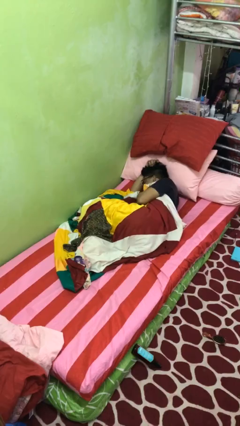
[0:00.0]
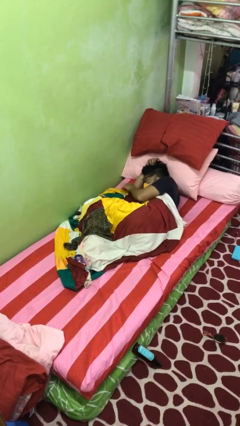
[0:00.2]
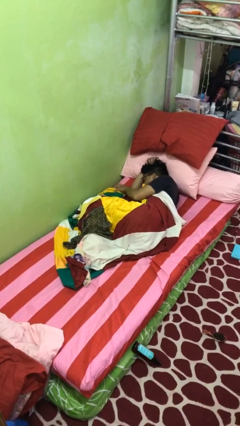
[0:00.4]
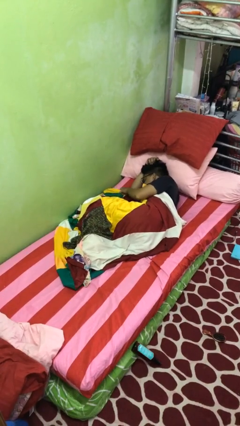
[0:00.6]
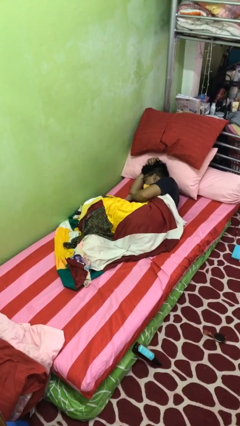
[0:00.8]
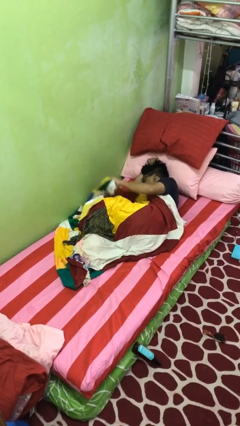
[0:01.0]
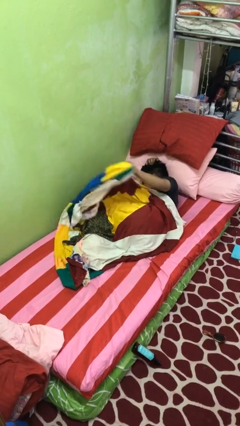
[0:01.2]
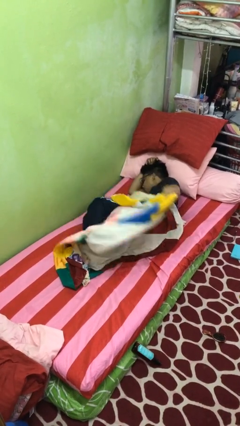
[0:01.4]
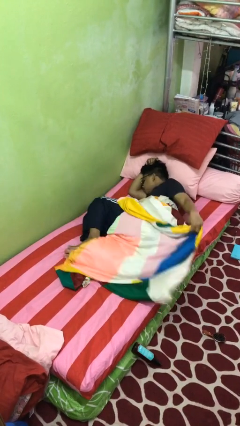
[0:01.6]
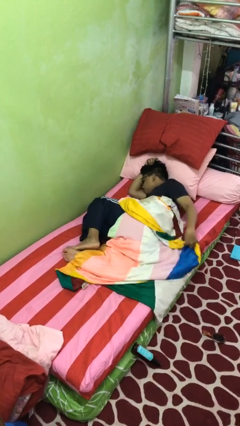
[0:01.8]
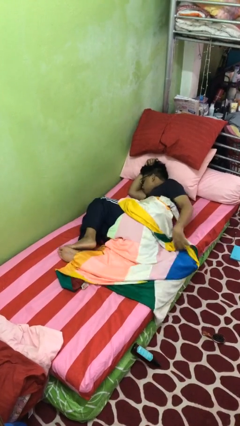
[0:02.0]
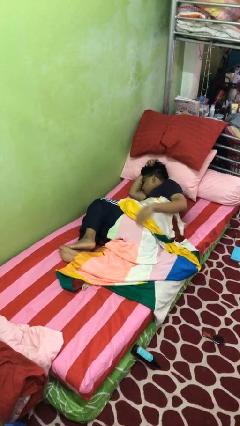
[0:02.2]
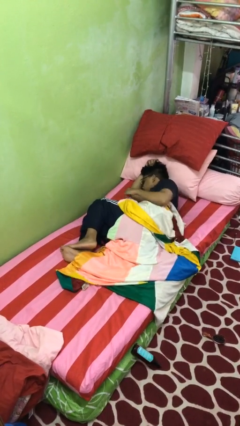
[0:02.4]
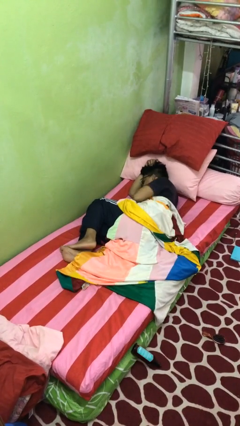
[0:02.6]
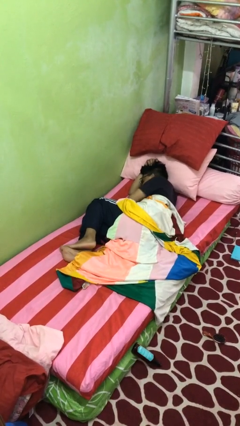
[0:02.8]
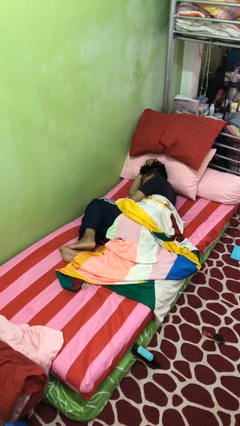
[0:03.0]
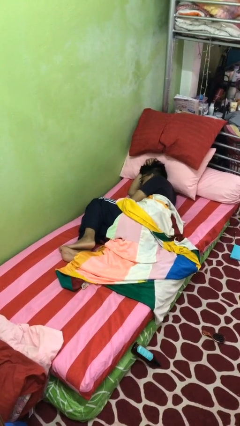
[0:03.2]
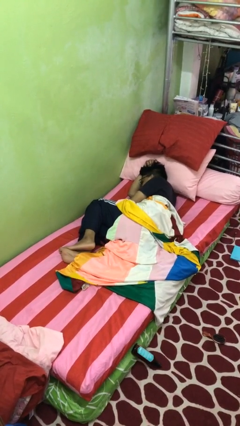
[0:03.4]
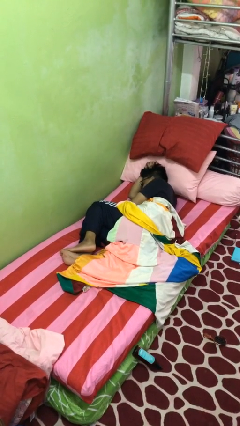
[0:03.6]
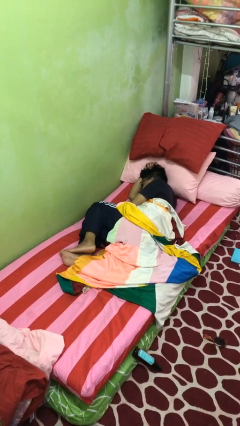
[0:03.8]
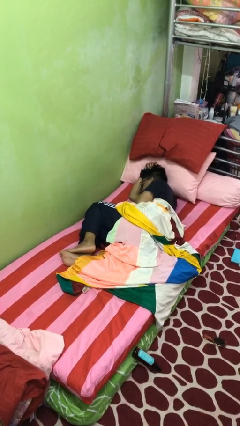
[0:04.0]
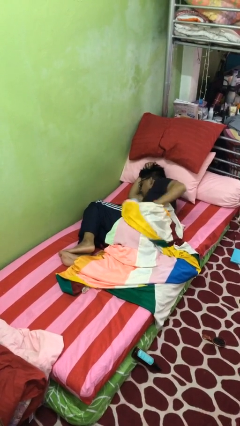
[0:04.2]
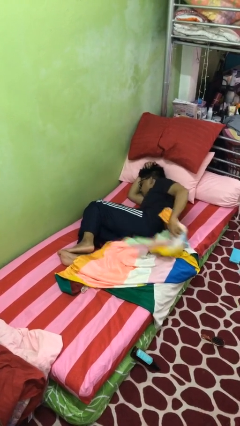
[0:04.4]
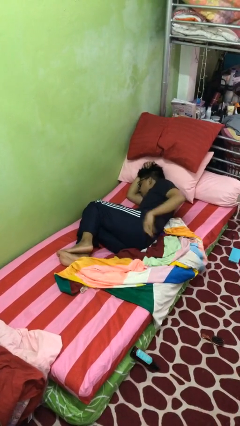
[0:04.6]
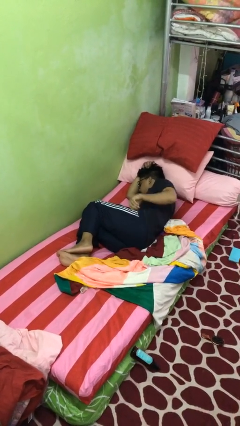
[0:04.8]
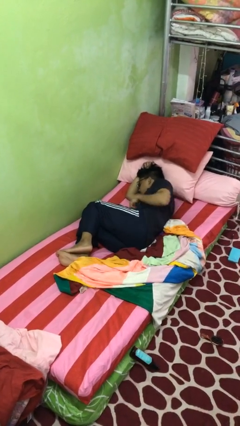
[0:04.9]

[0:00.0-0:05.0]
person uncovers with blanket

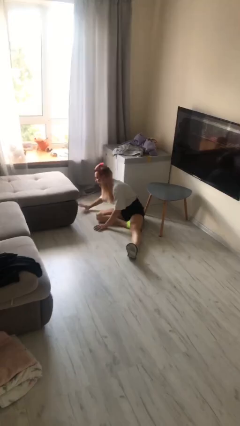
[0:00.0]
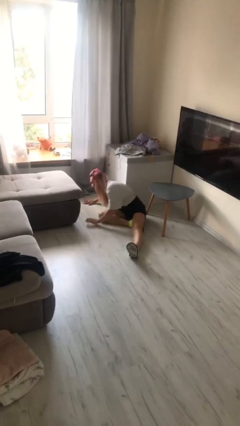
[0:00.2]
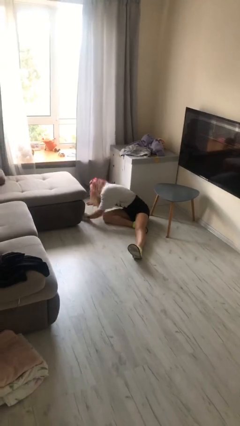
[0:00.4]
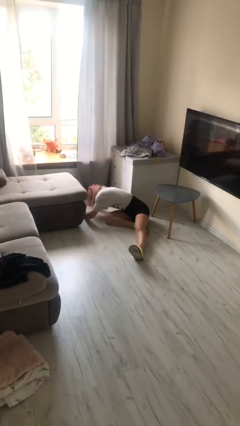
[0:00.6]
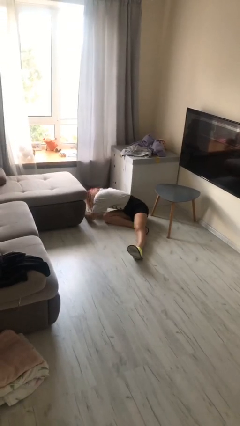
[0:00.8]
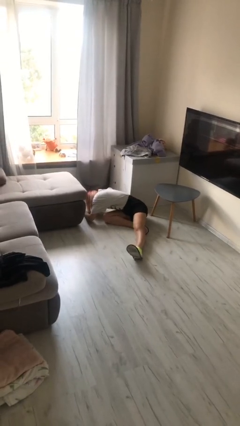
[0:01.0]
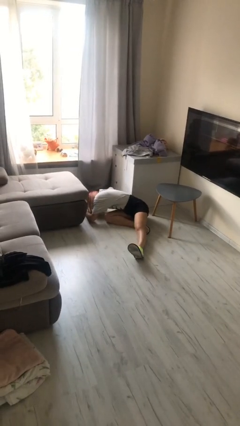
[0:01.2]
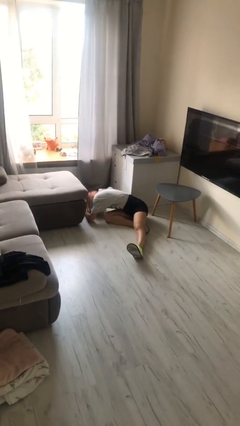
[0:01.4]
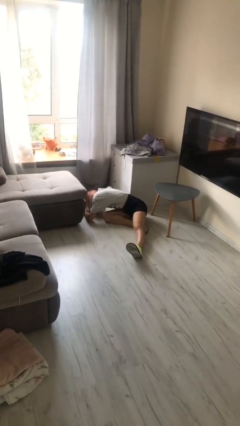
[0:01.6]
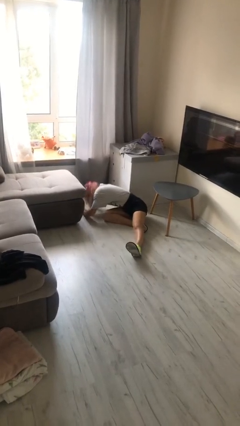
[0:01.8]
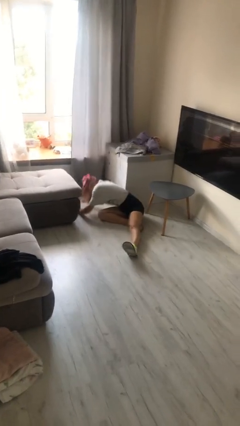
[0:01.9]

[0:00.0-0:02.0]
person searches under couch

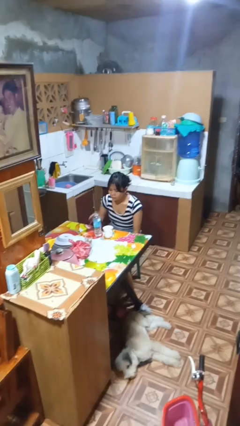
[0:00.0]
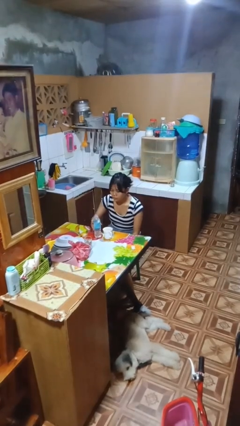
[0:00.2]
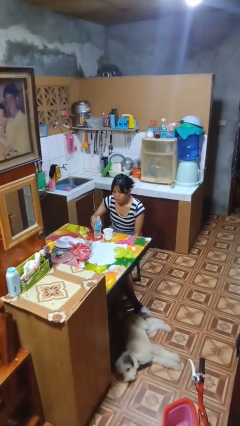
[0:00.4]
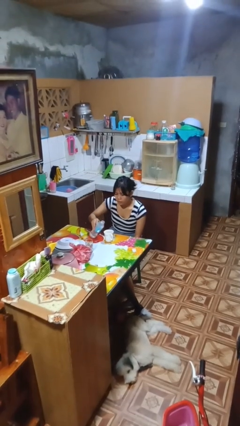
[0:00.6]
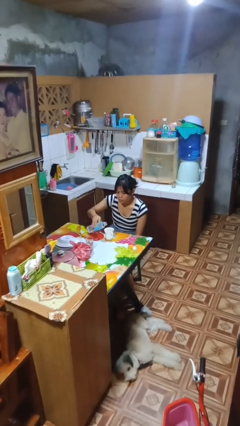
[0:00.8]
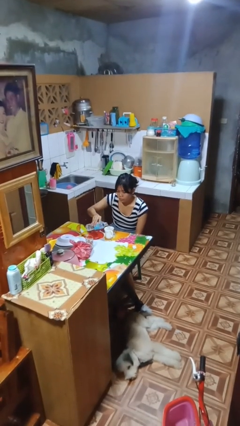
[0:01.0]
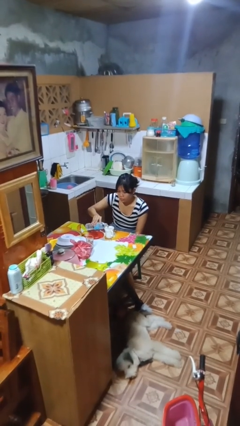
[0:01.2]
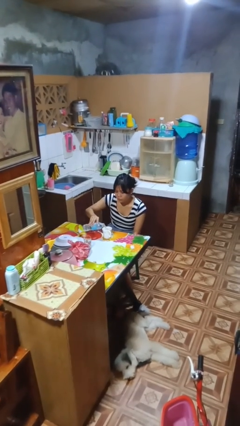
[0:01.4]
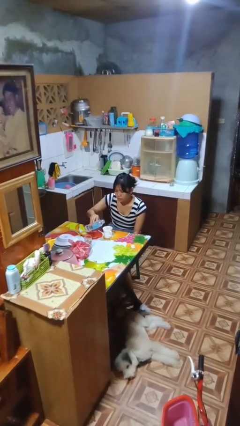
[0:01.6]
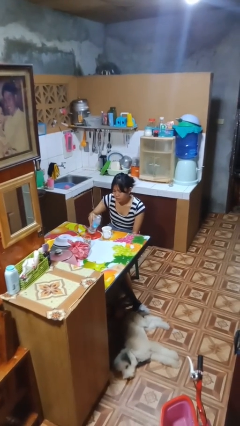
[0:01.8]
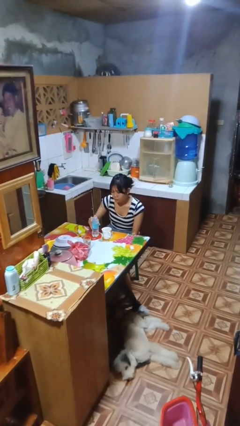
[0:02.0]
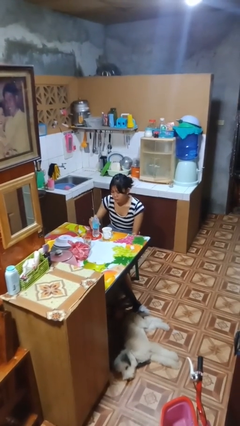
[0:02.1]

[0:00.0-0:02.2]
person pours liquid into cup

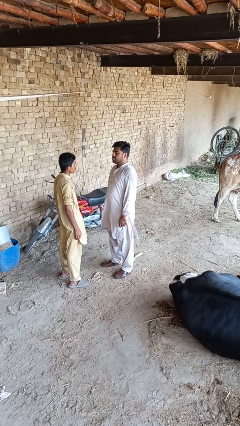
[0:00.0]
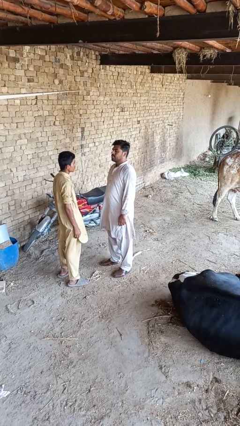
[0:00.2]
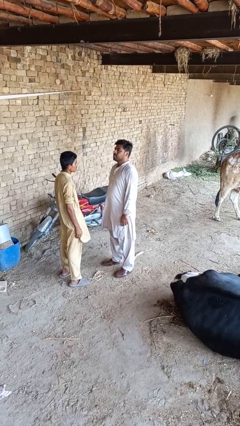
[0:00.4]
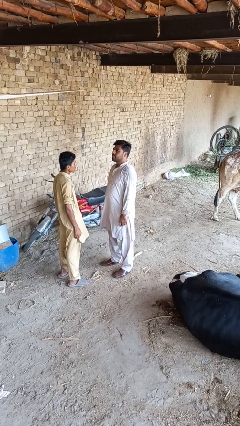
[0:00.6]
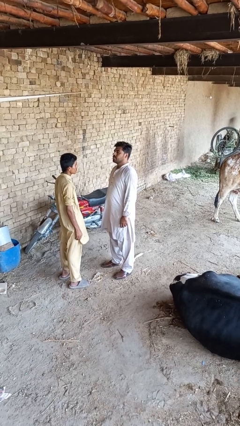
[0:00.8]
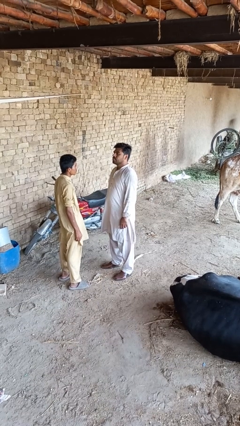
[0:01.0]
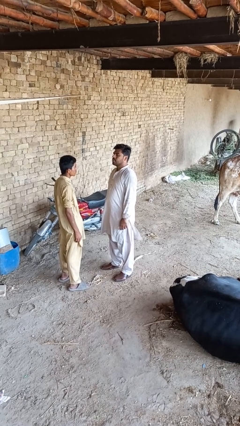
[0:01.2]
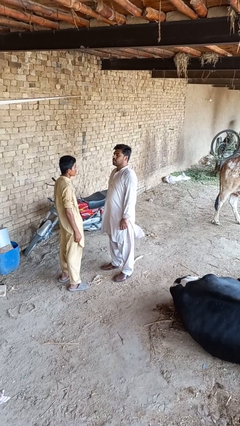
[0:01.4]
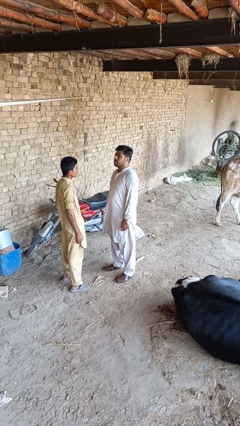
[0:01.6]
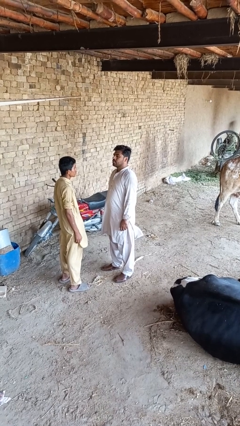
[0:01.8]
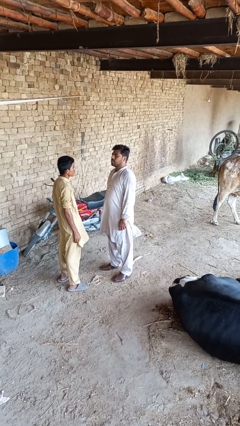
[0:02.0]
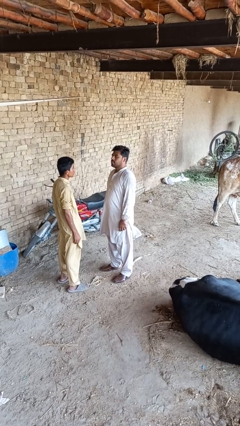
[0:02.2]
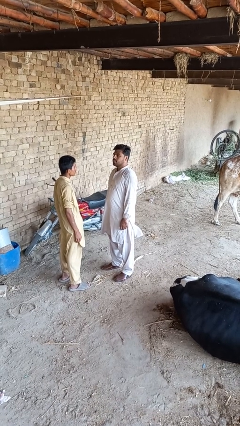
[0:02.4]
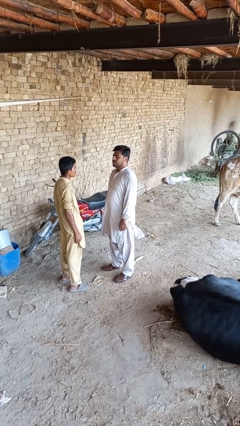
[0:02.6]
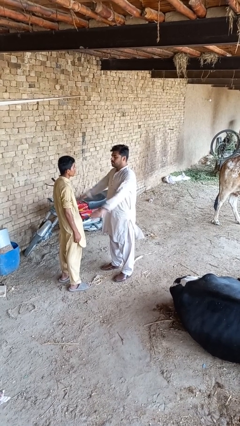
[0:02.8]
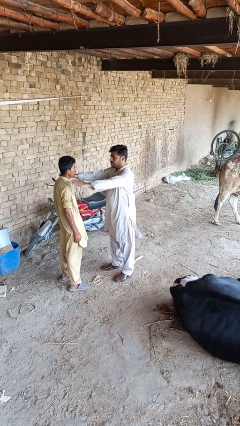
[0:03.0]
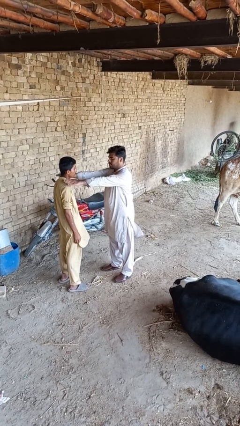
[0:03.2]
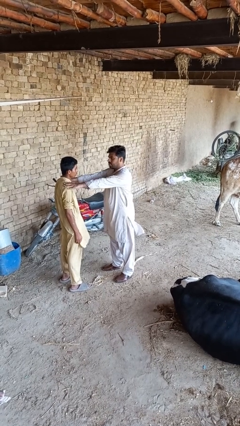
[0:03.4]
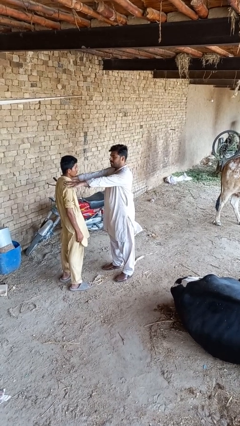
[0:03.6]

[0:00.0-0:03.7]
person pounds shoulders of person

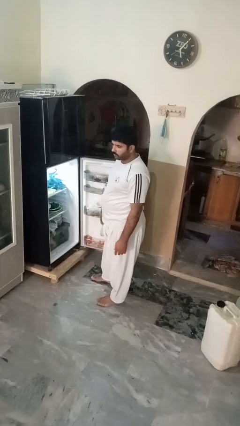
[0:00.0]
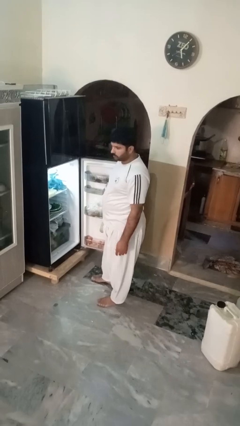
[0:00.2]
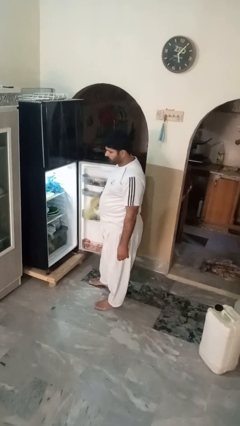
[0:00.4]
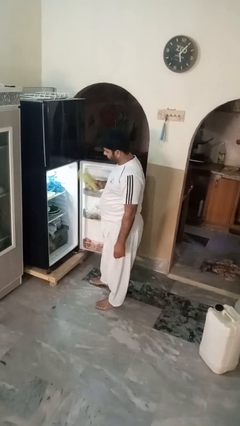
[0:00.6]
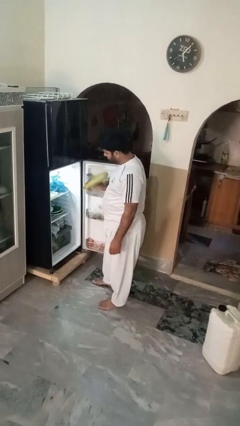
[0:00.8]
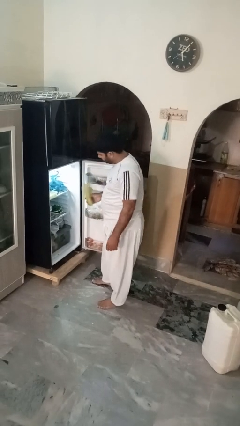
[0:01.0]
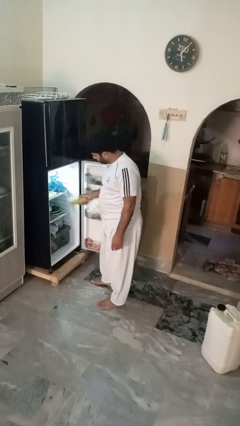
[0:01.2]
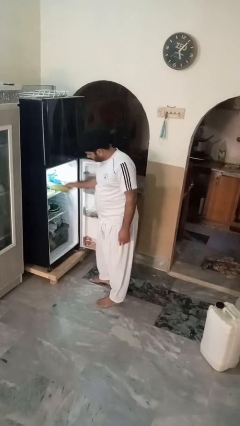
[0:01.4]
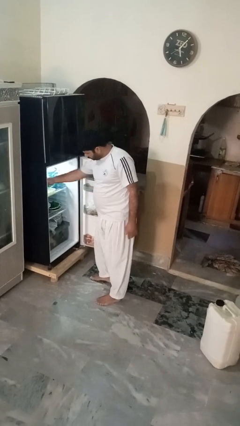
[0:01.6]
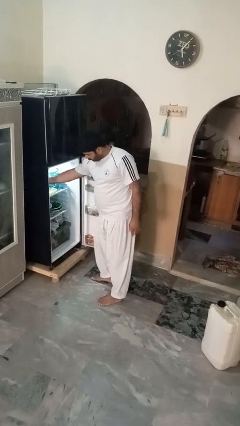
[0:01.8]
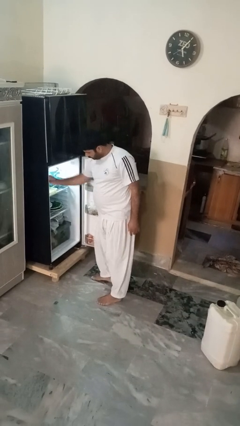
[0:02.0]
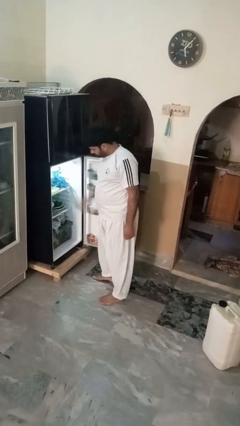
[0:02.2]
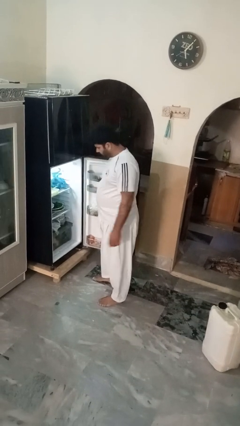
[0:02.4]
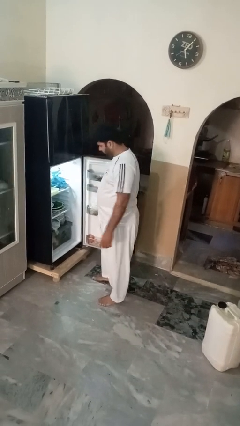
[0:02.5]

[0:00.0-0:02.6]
person puts object into refrigerator

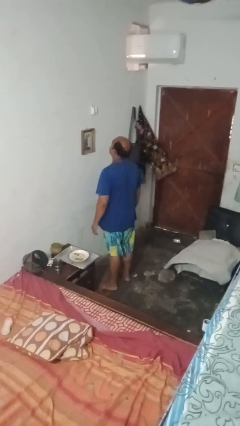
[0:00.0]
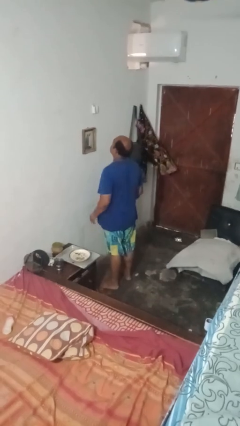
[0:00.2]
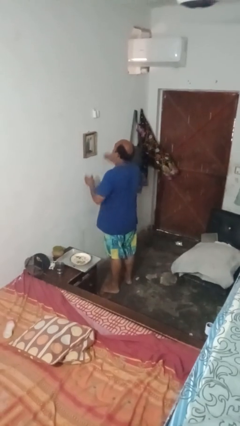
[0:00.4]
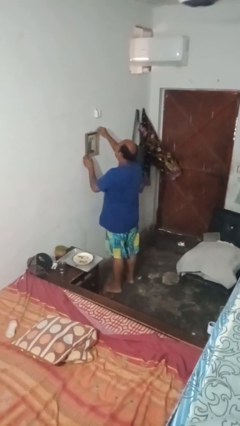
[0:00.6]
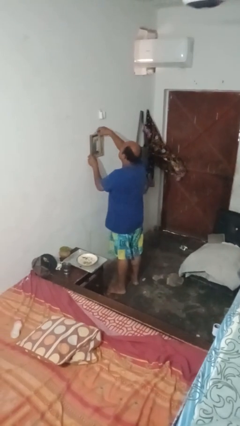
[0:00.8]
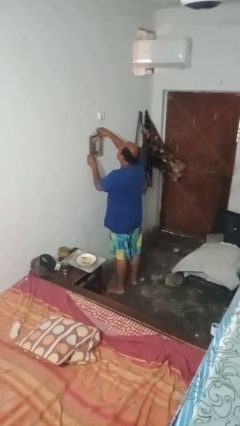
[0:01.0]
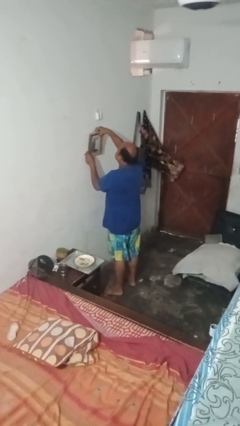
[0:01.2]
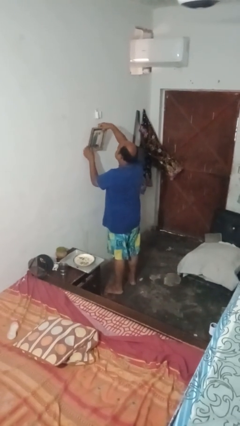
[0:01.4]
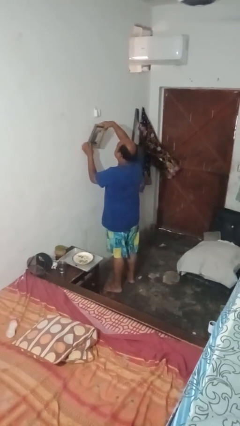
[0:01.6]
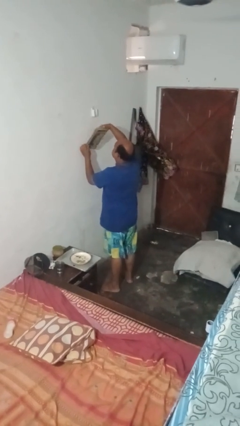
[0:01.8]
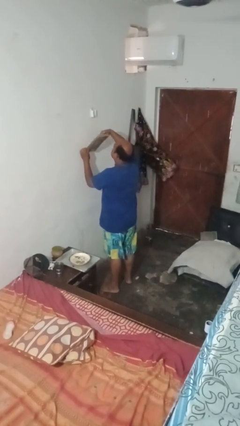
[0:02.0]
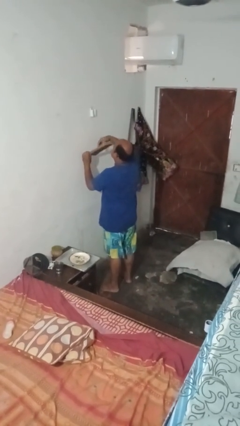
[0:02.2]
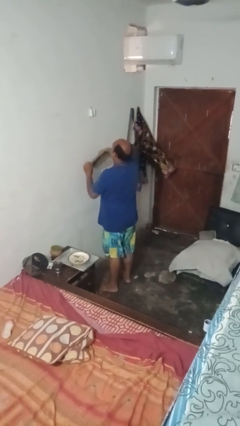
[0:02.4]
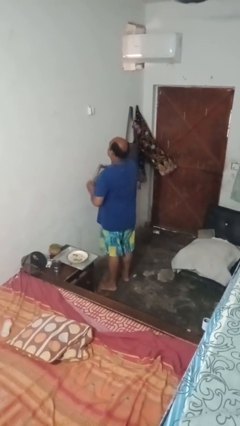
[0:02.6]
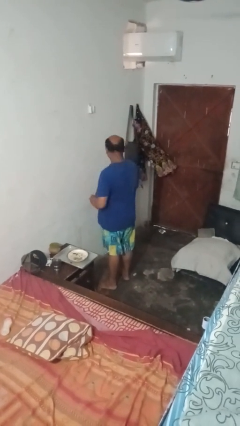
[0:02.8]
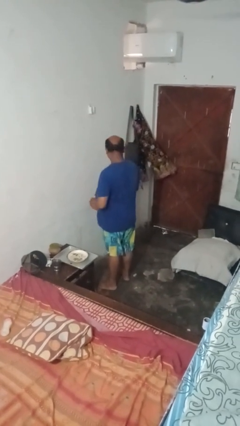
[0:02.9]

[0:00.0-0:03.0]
person takes down picture frame
